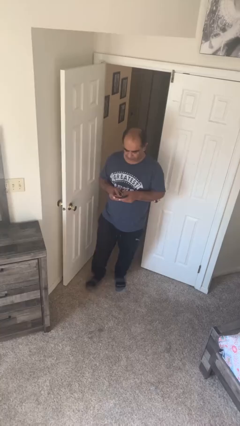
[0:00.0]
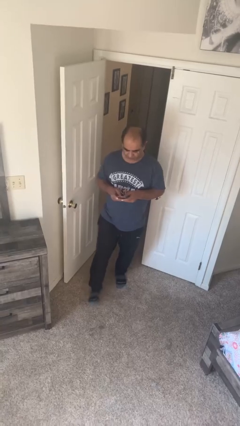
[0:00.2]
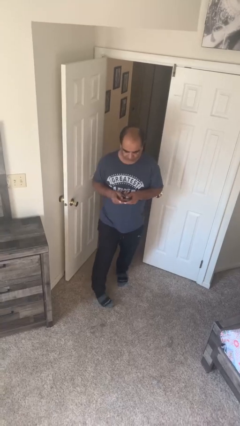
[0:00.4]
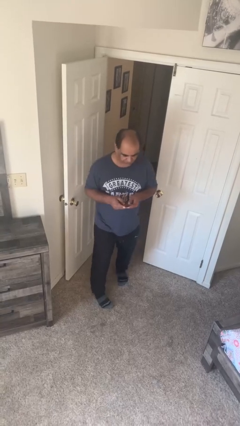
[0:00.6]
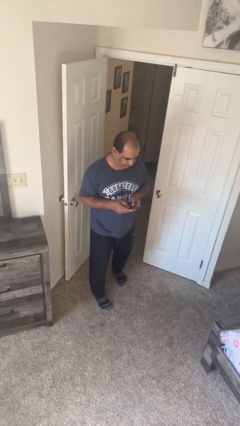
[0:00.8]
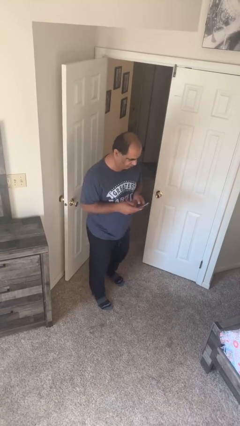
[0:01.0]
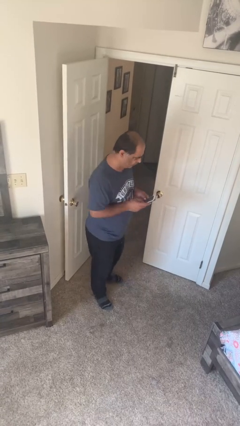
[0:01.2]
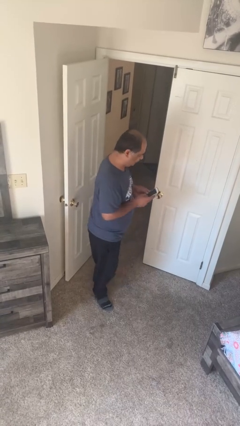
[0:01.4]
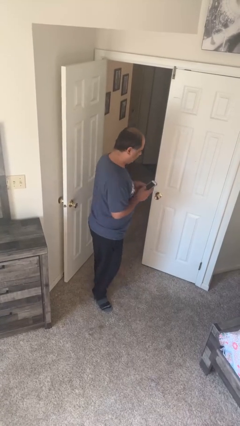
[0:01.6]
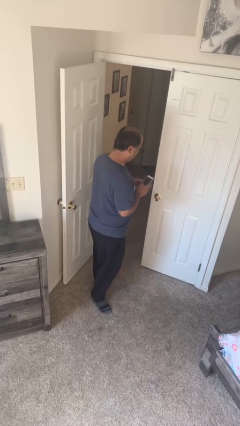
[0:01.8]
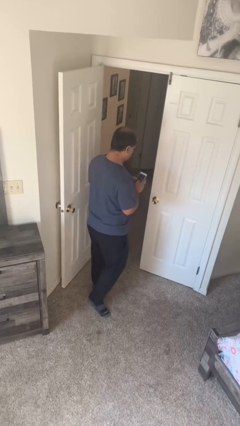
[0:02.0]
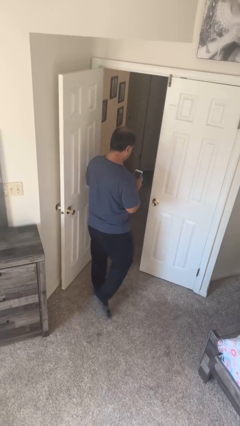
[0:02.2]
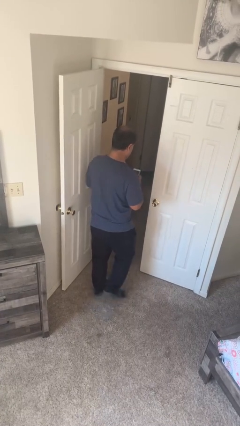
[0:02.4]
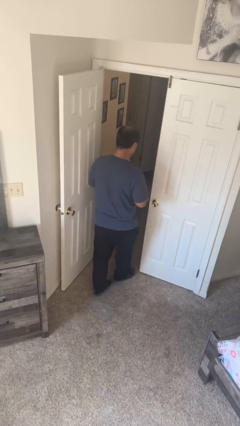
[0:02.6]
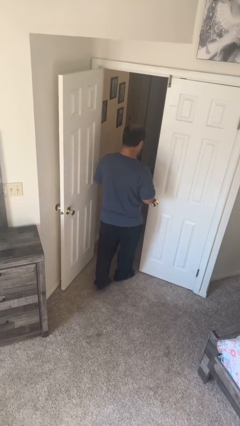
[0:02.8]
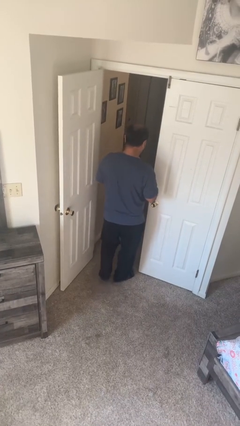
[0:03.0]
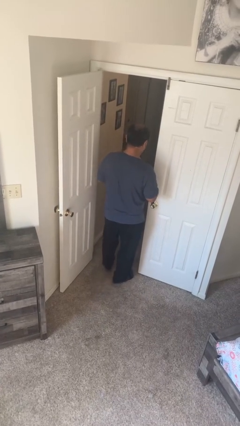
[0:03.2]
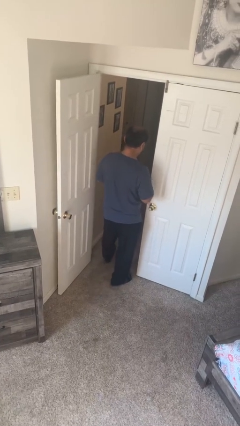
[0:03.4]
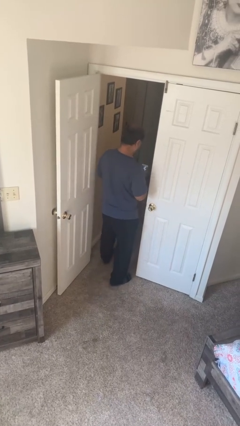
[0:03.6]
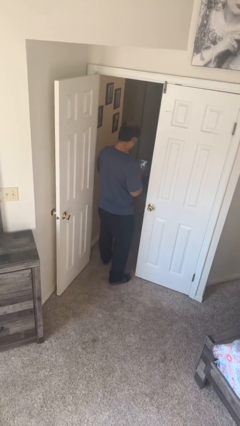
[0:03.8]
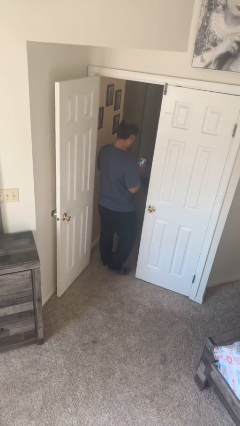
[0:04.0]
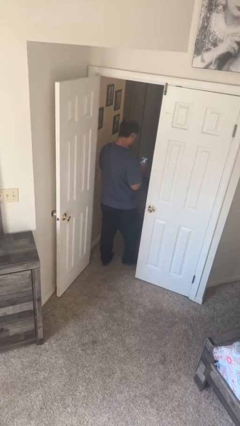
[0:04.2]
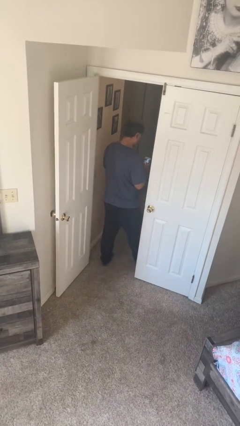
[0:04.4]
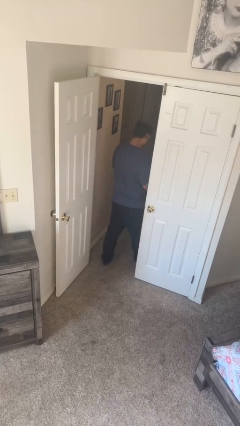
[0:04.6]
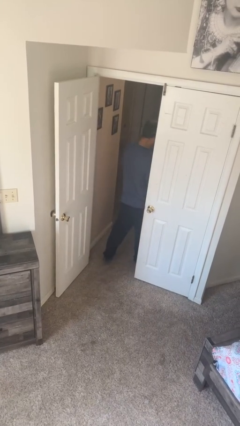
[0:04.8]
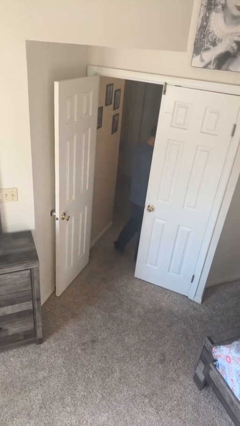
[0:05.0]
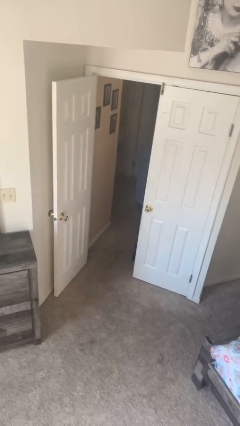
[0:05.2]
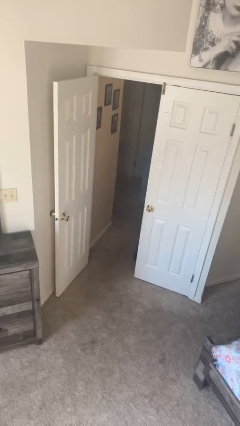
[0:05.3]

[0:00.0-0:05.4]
person exits scene through structure

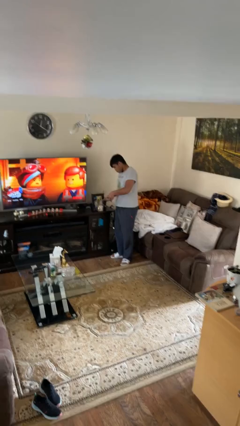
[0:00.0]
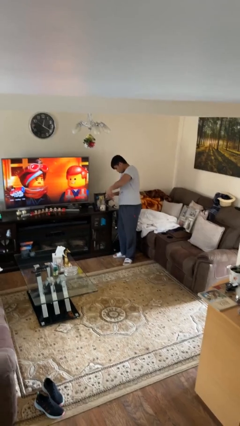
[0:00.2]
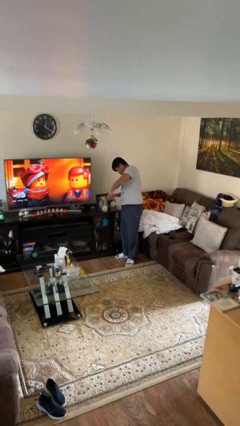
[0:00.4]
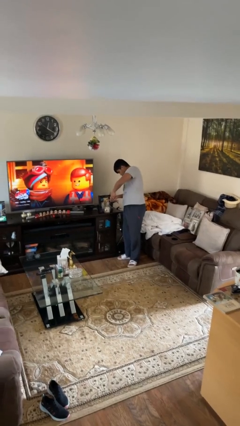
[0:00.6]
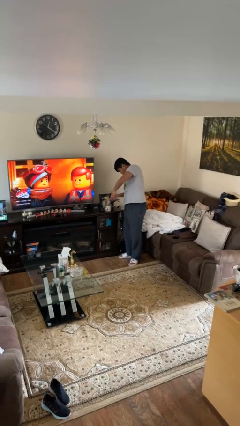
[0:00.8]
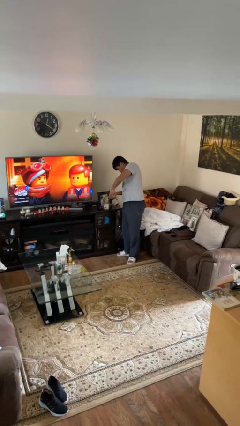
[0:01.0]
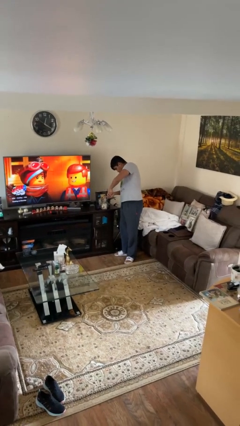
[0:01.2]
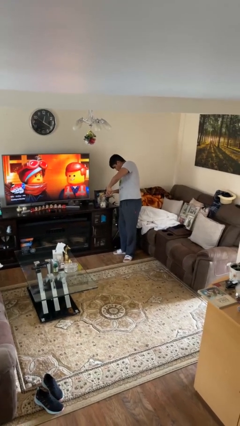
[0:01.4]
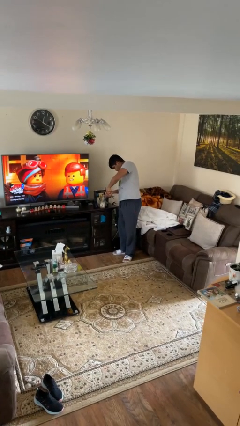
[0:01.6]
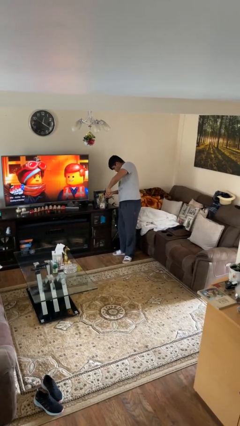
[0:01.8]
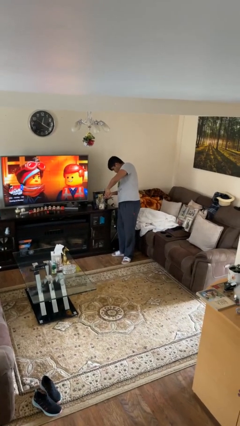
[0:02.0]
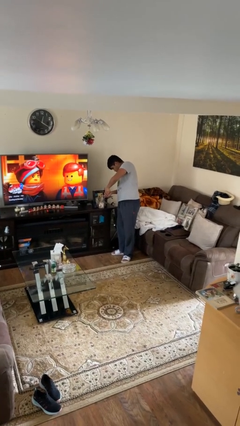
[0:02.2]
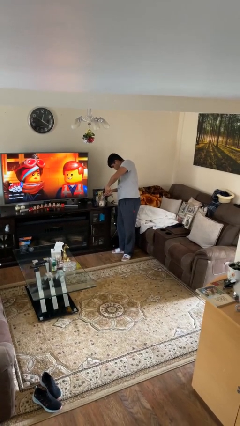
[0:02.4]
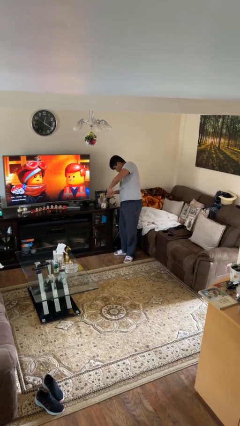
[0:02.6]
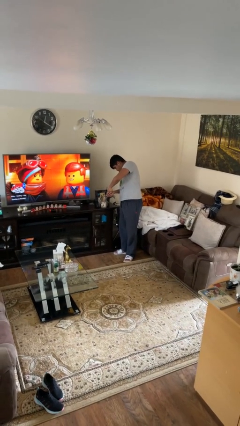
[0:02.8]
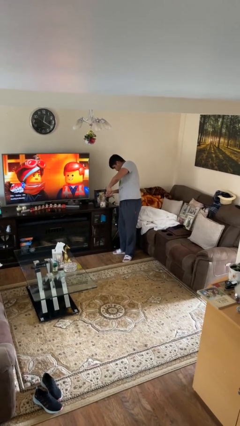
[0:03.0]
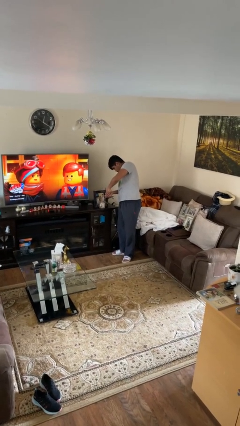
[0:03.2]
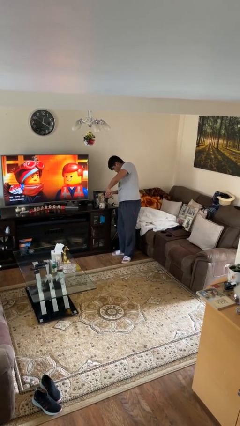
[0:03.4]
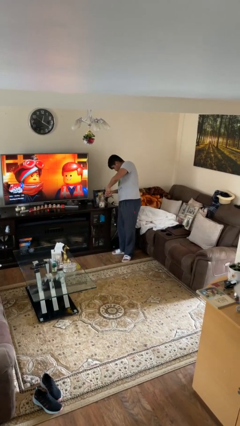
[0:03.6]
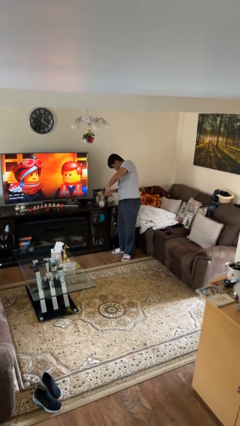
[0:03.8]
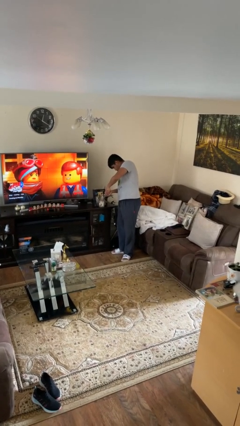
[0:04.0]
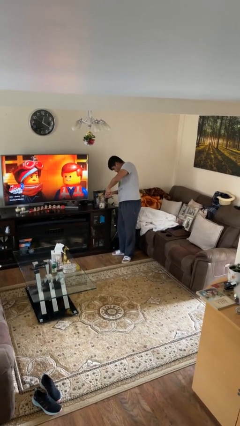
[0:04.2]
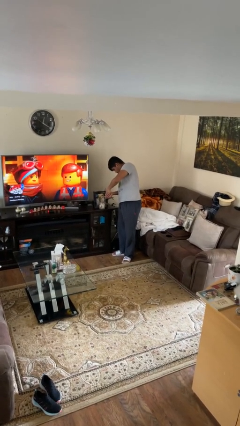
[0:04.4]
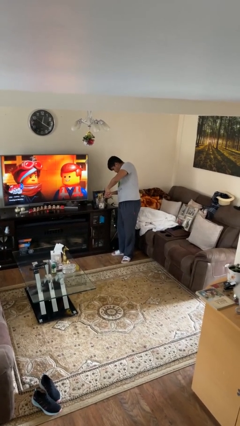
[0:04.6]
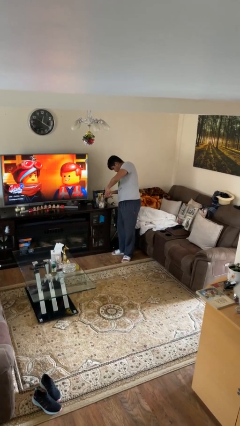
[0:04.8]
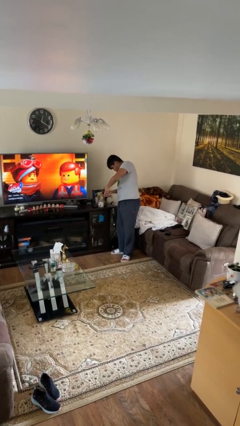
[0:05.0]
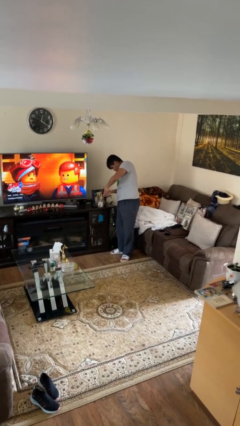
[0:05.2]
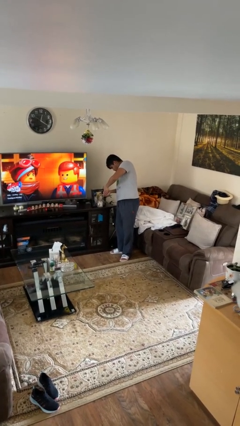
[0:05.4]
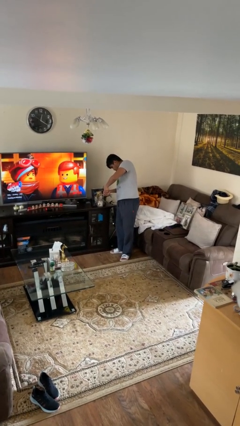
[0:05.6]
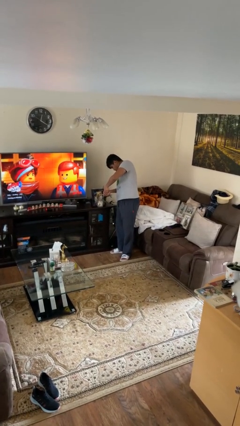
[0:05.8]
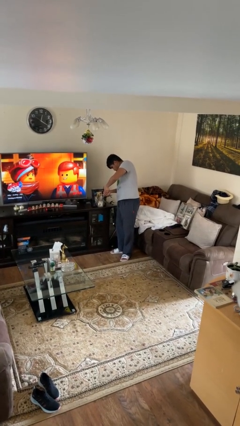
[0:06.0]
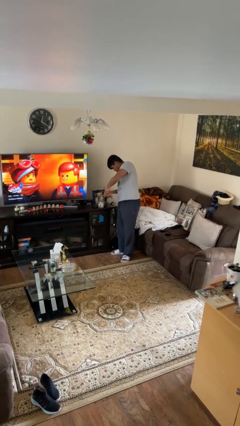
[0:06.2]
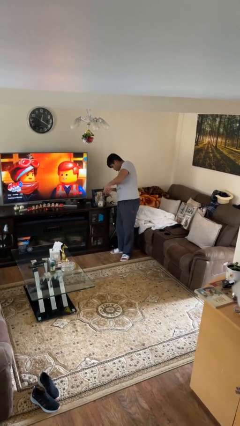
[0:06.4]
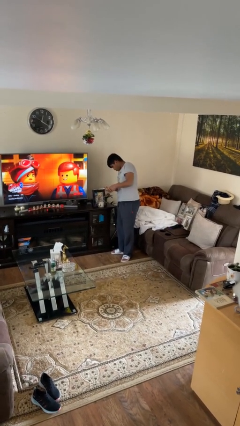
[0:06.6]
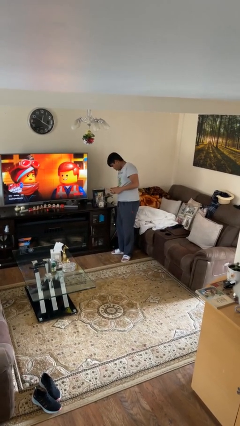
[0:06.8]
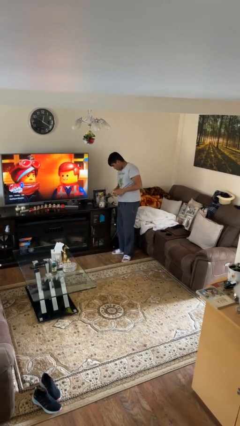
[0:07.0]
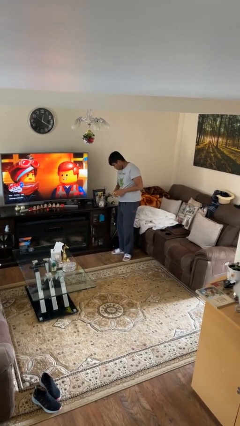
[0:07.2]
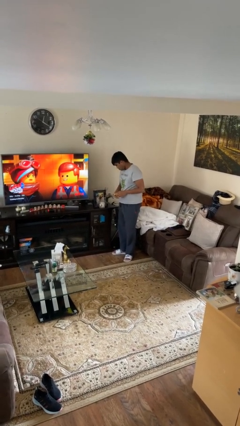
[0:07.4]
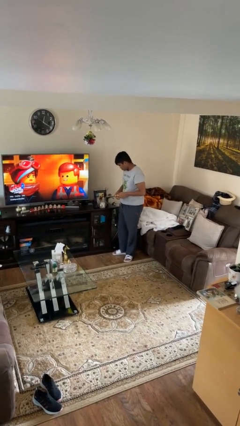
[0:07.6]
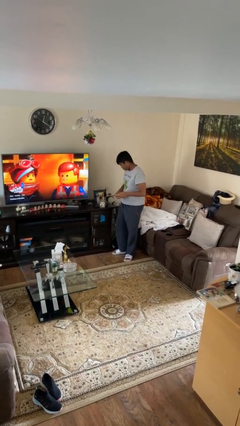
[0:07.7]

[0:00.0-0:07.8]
person lights candle

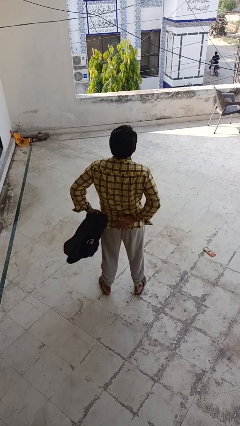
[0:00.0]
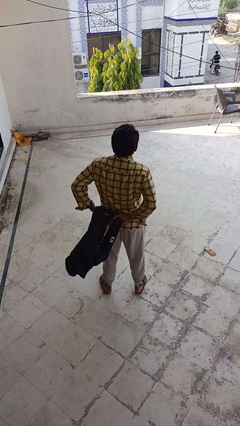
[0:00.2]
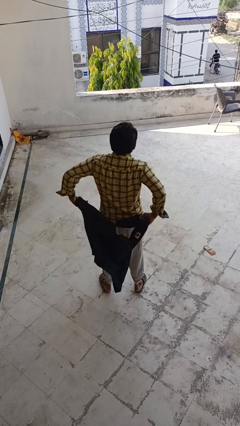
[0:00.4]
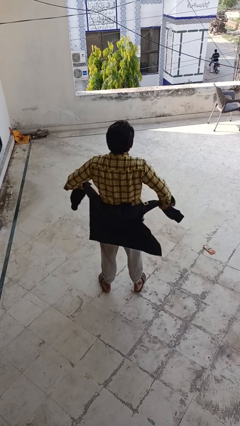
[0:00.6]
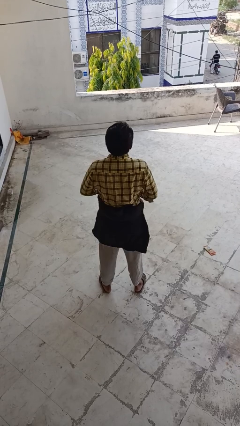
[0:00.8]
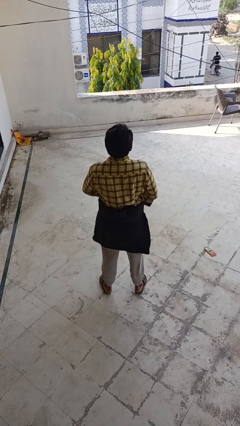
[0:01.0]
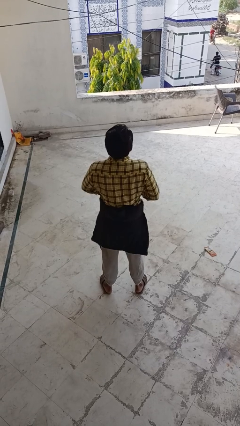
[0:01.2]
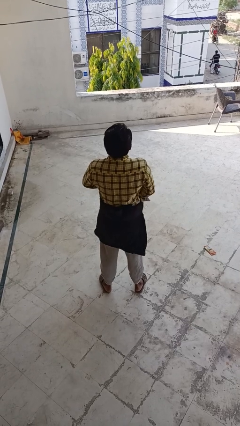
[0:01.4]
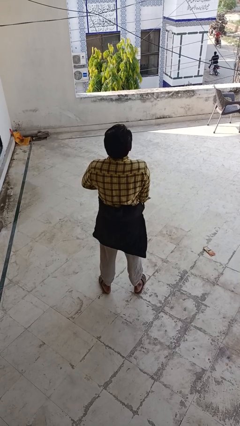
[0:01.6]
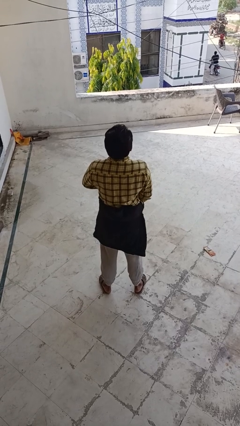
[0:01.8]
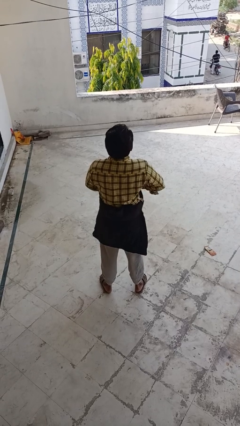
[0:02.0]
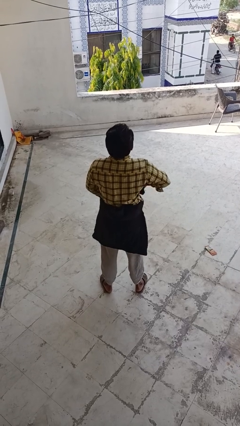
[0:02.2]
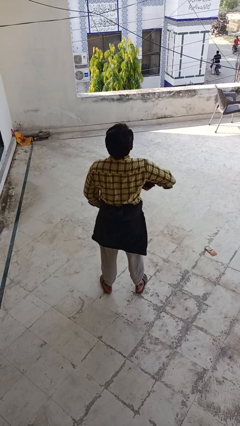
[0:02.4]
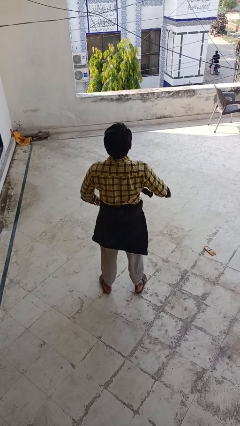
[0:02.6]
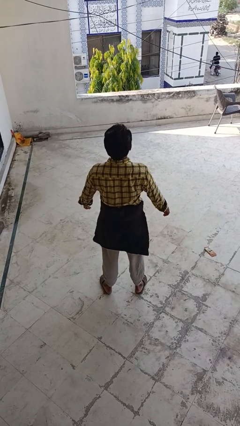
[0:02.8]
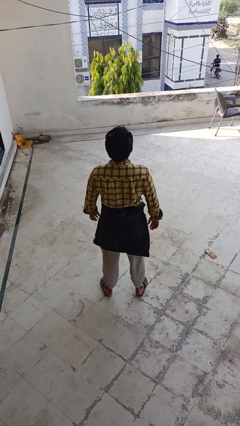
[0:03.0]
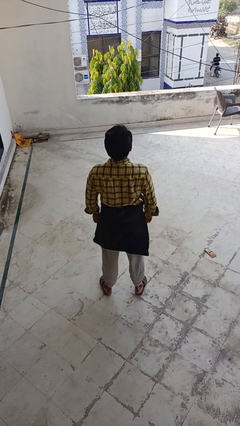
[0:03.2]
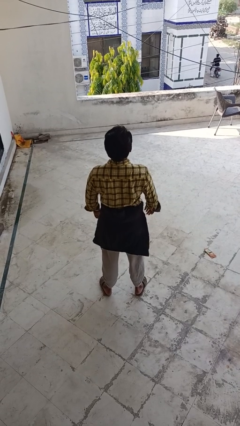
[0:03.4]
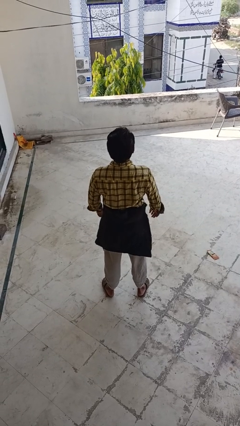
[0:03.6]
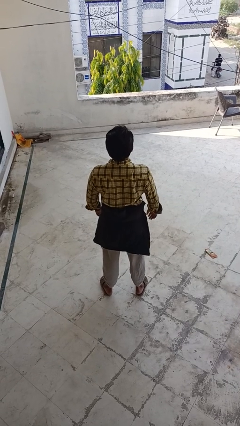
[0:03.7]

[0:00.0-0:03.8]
person ties jacket around waist

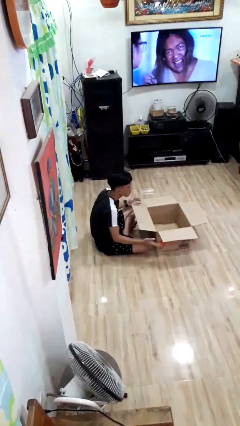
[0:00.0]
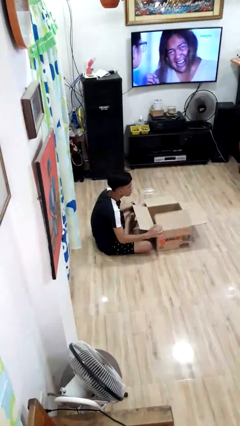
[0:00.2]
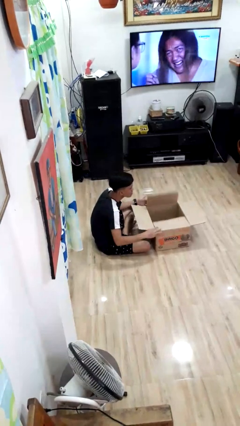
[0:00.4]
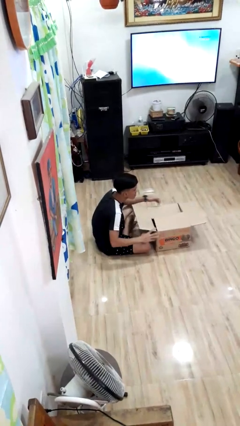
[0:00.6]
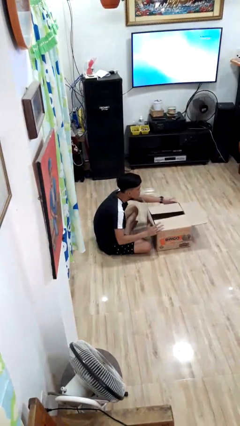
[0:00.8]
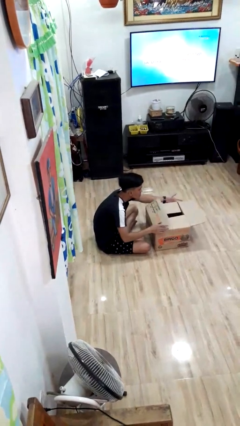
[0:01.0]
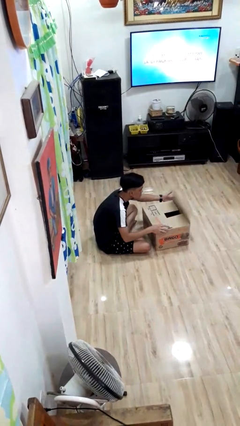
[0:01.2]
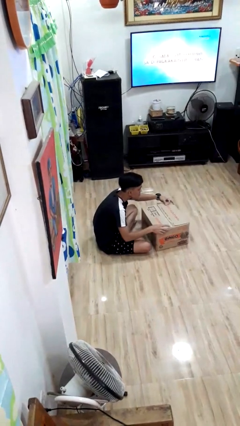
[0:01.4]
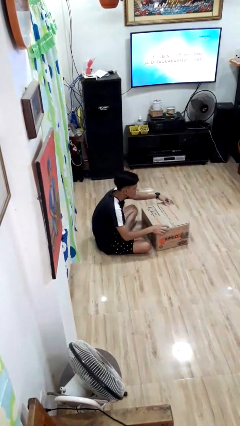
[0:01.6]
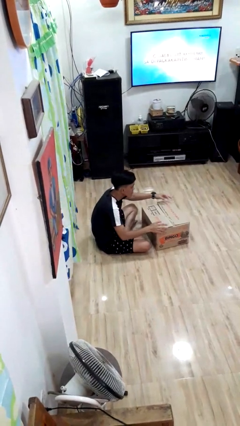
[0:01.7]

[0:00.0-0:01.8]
person closes box
